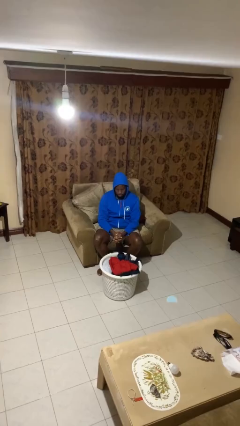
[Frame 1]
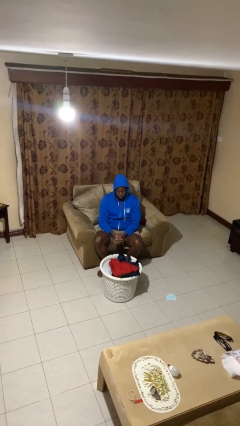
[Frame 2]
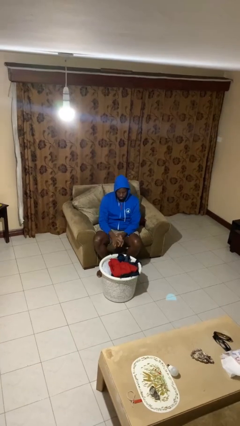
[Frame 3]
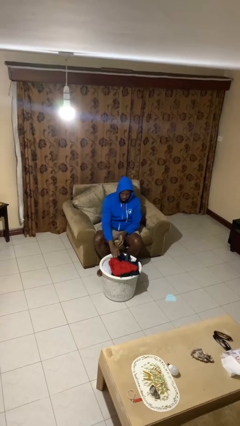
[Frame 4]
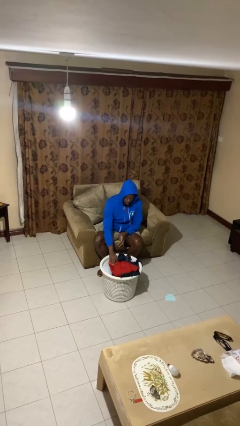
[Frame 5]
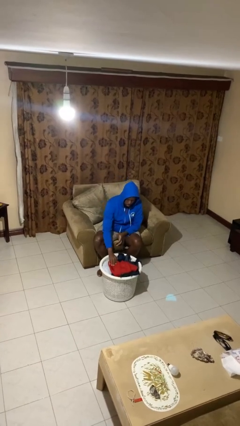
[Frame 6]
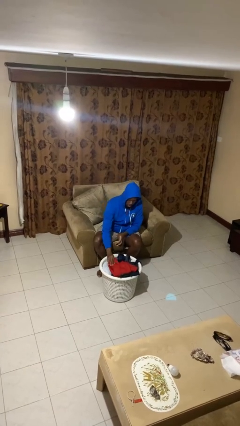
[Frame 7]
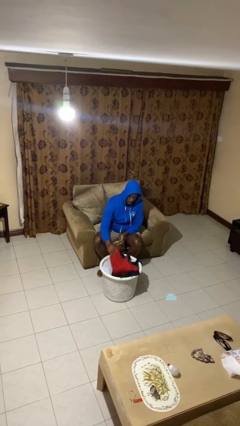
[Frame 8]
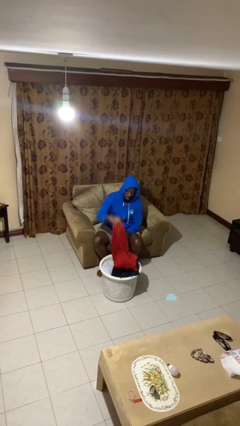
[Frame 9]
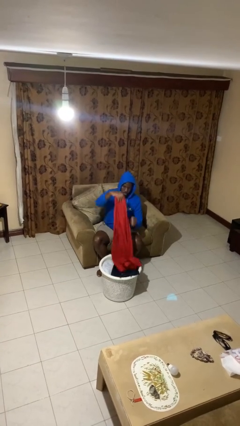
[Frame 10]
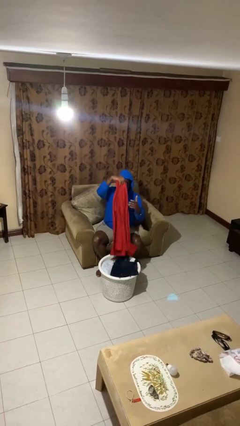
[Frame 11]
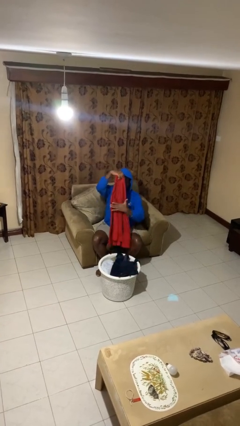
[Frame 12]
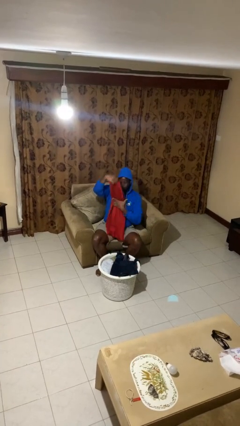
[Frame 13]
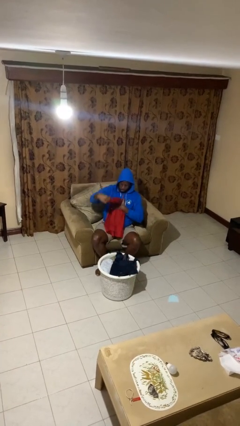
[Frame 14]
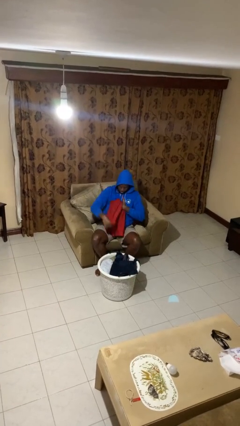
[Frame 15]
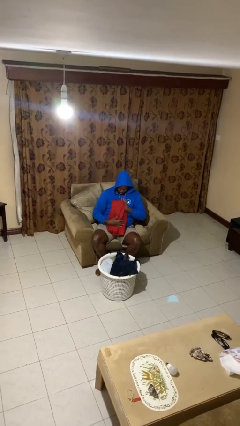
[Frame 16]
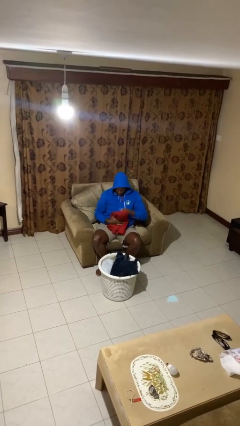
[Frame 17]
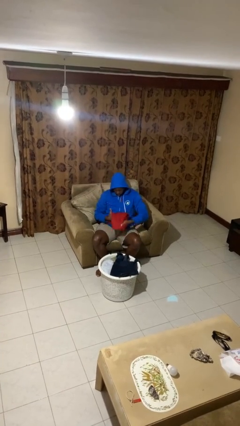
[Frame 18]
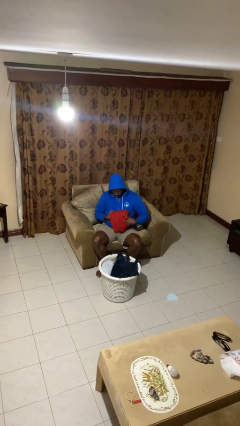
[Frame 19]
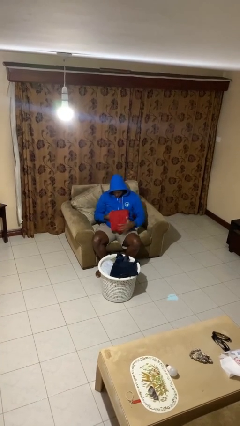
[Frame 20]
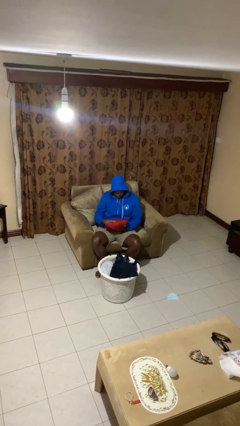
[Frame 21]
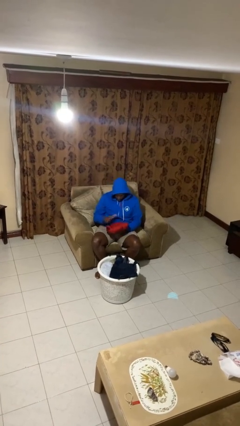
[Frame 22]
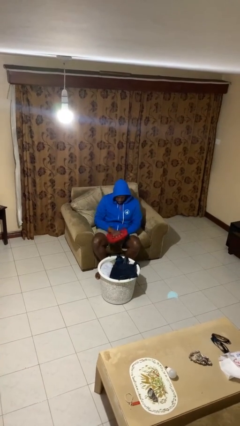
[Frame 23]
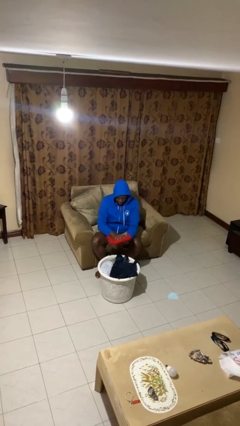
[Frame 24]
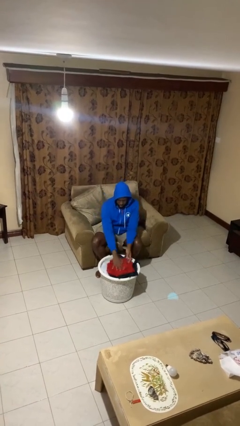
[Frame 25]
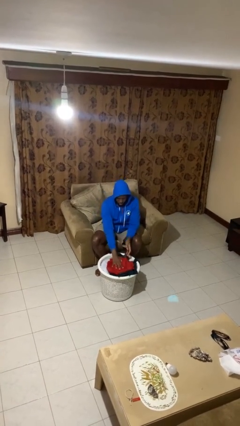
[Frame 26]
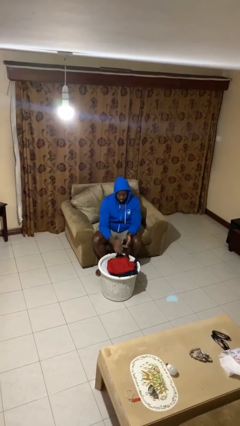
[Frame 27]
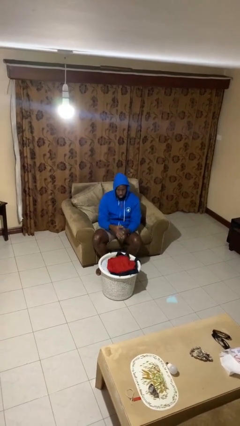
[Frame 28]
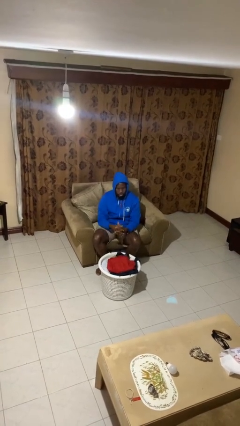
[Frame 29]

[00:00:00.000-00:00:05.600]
person folds shirt

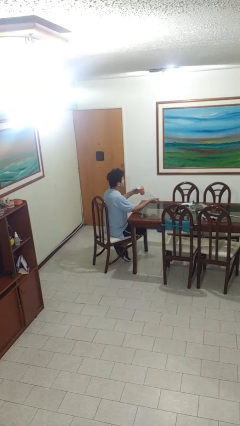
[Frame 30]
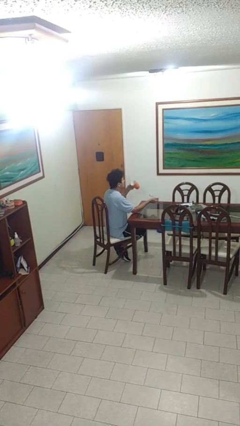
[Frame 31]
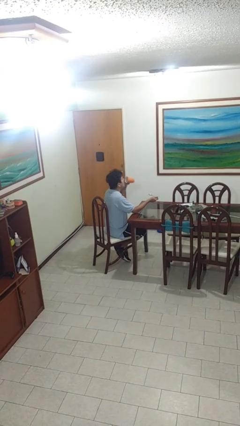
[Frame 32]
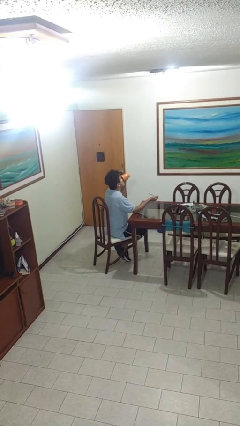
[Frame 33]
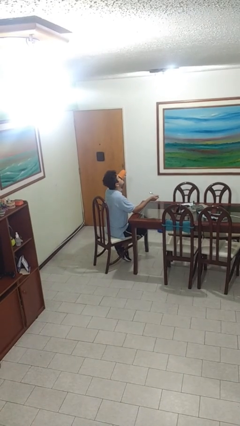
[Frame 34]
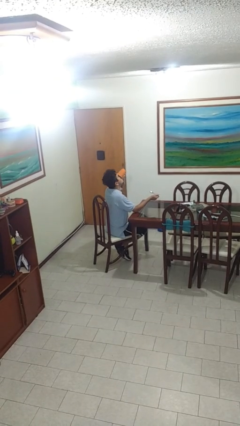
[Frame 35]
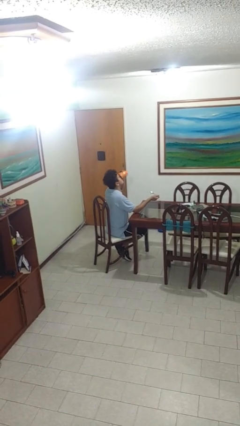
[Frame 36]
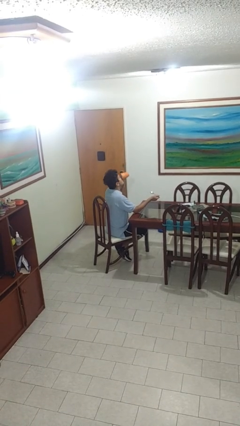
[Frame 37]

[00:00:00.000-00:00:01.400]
person drinks from mug

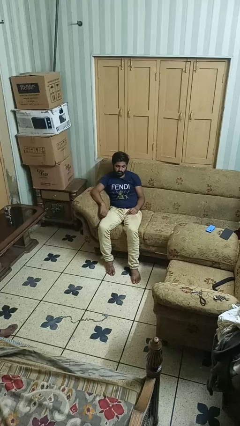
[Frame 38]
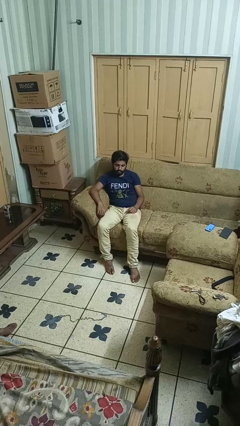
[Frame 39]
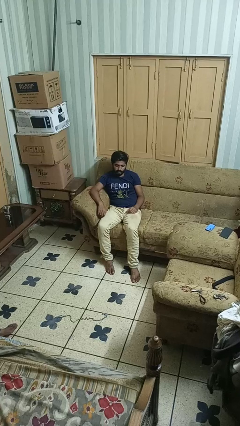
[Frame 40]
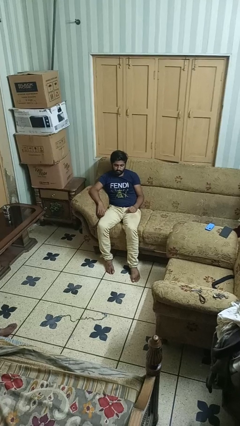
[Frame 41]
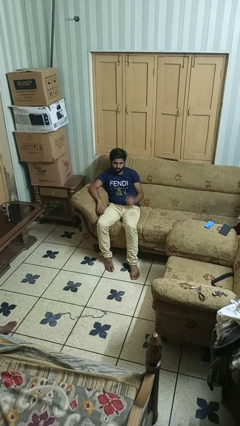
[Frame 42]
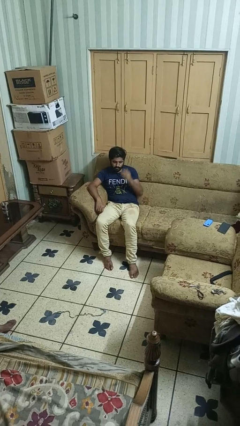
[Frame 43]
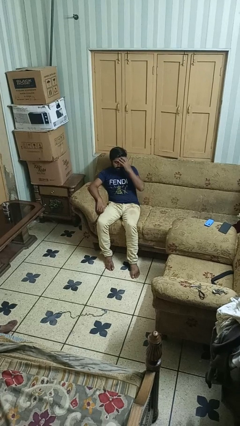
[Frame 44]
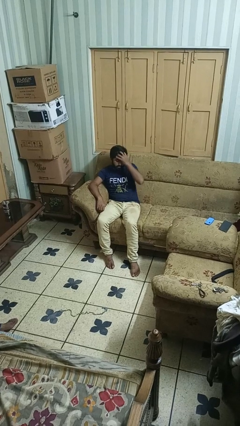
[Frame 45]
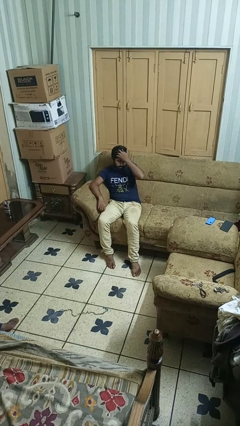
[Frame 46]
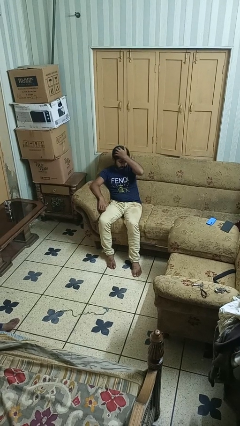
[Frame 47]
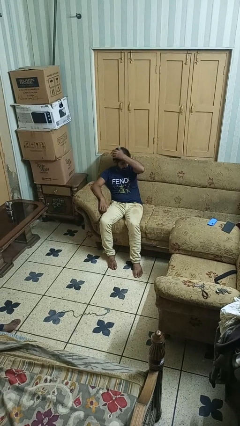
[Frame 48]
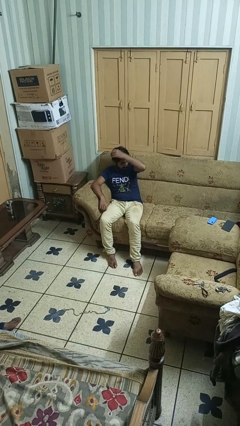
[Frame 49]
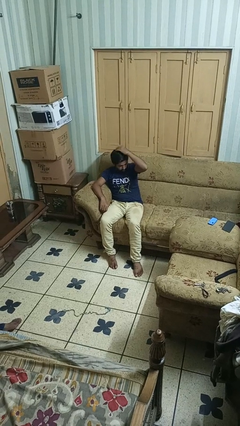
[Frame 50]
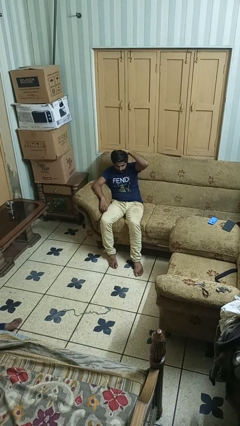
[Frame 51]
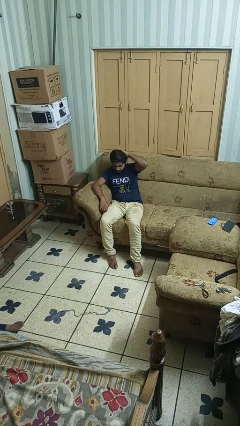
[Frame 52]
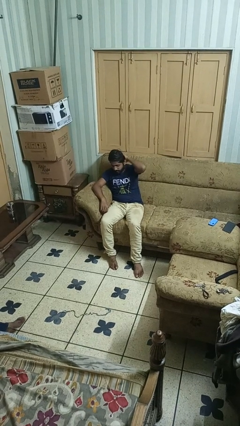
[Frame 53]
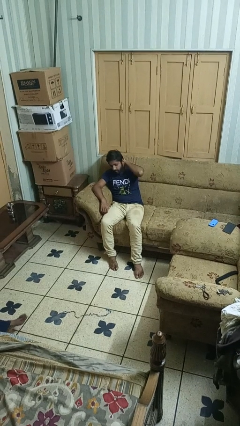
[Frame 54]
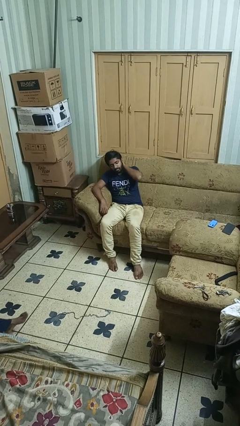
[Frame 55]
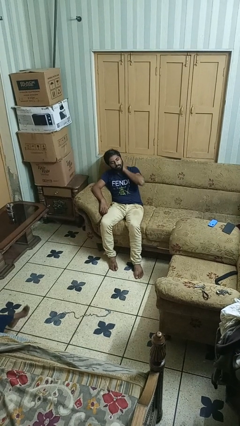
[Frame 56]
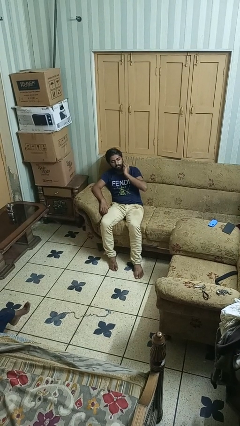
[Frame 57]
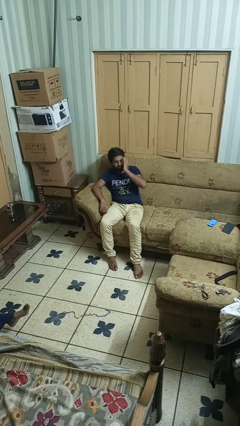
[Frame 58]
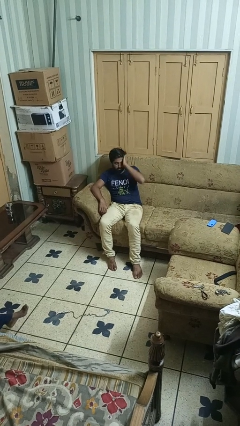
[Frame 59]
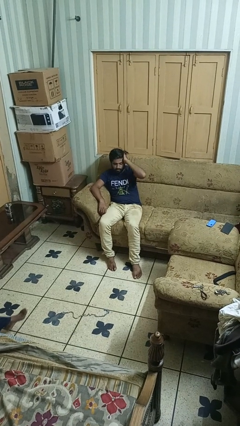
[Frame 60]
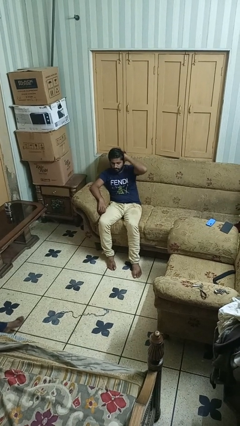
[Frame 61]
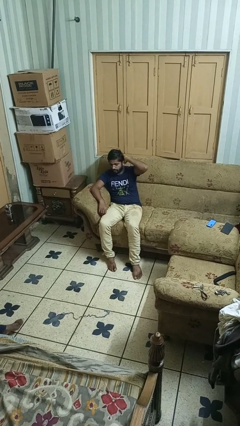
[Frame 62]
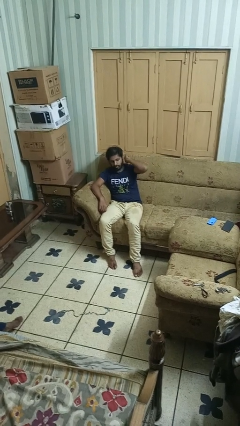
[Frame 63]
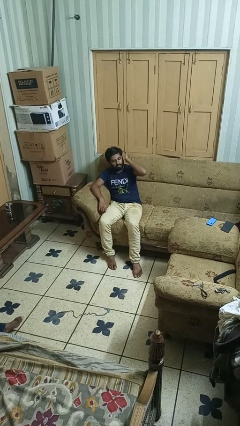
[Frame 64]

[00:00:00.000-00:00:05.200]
person strokes hair

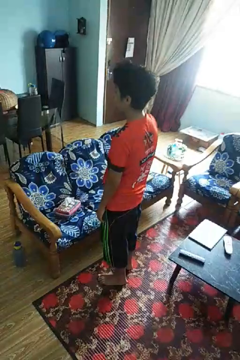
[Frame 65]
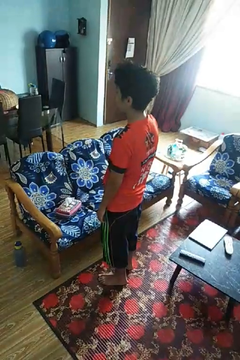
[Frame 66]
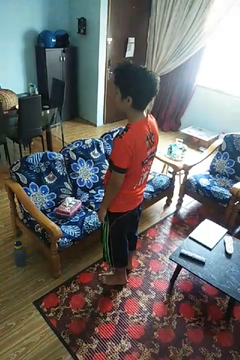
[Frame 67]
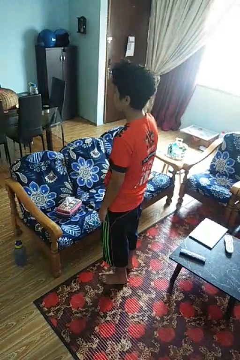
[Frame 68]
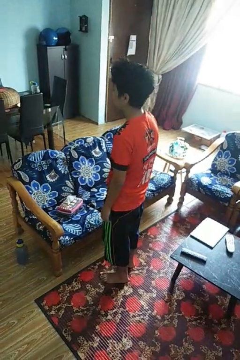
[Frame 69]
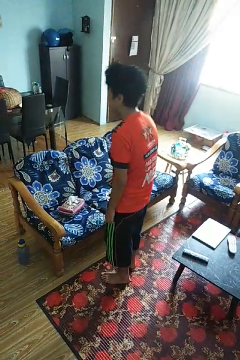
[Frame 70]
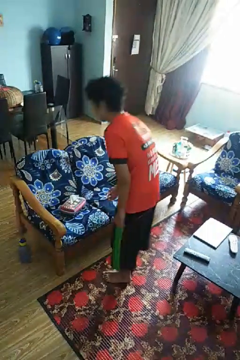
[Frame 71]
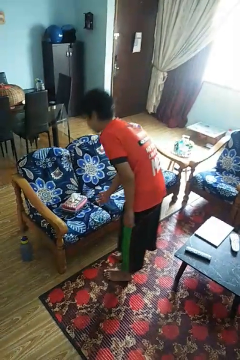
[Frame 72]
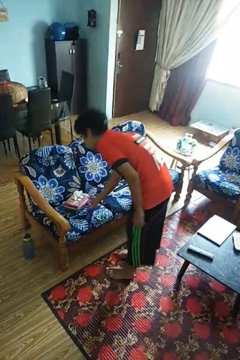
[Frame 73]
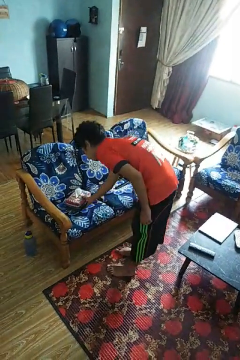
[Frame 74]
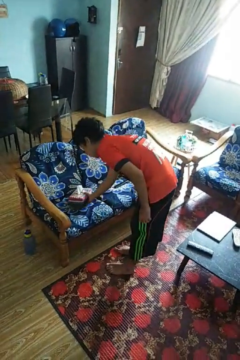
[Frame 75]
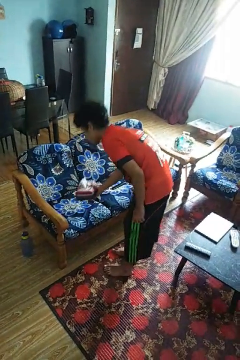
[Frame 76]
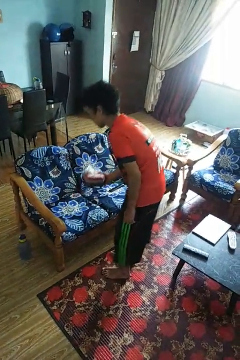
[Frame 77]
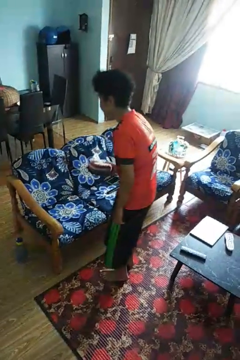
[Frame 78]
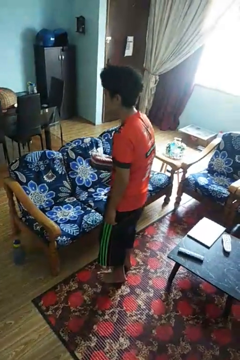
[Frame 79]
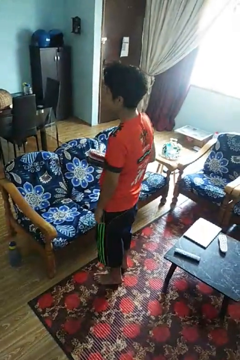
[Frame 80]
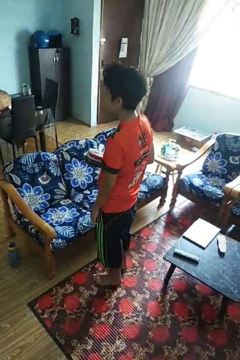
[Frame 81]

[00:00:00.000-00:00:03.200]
person picks up object from couch

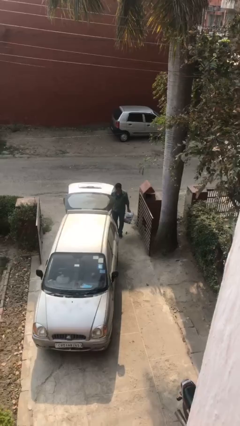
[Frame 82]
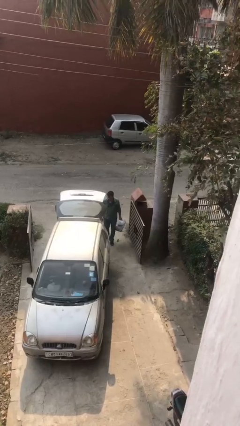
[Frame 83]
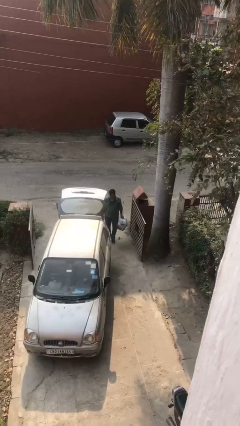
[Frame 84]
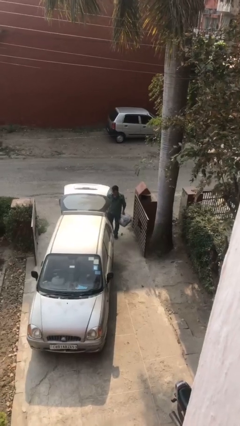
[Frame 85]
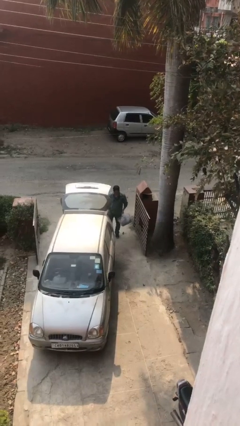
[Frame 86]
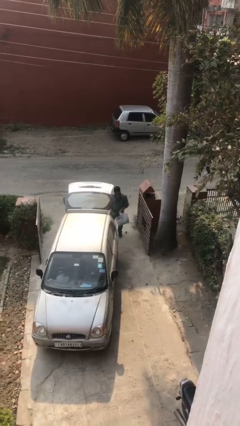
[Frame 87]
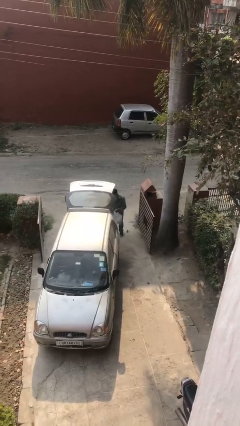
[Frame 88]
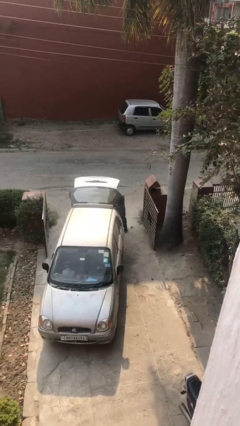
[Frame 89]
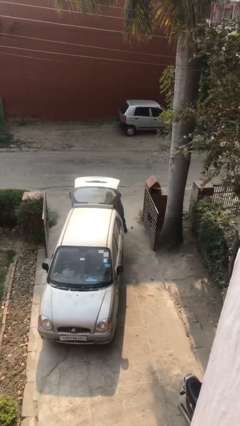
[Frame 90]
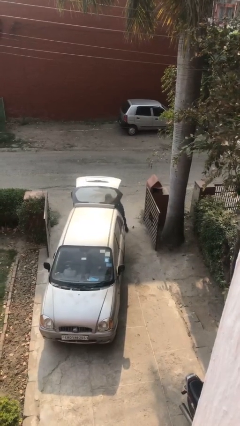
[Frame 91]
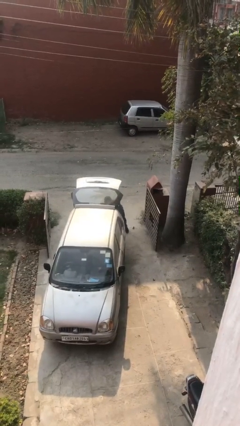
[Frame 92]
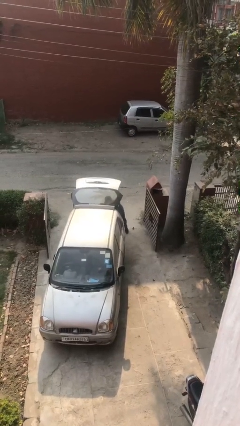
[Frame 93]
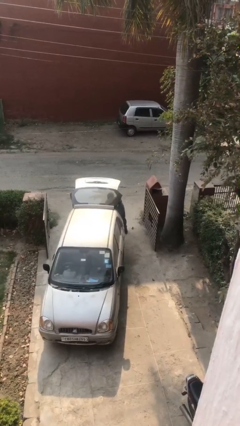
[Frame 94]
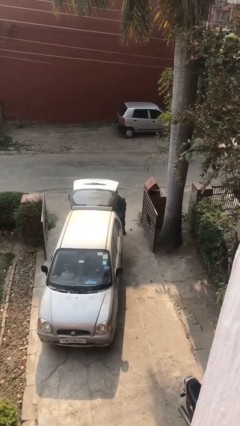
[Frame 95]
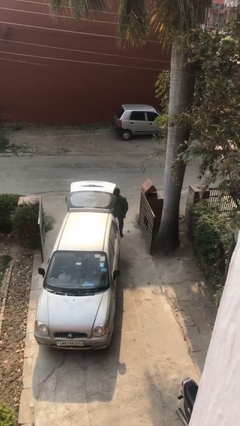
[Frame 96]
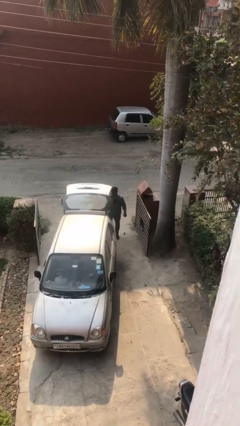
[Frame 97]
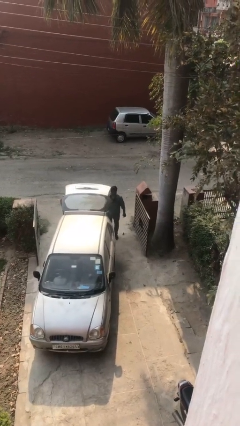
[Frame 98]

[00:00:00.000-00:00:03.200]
person loads car
